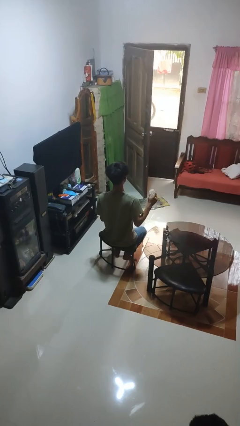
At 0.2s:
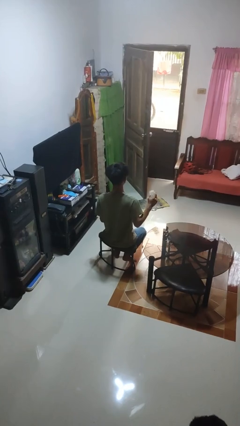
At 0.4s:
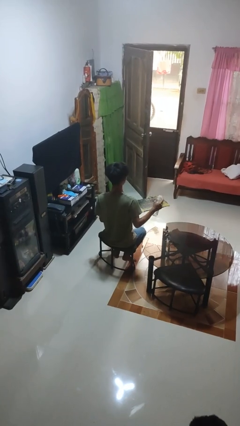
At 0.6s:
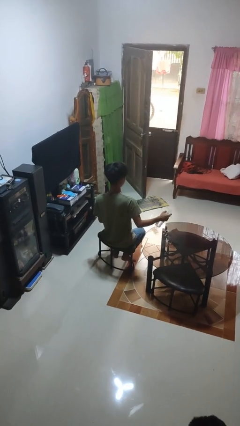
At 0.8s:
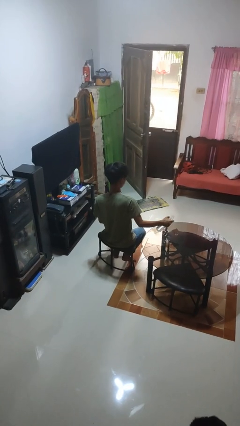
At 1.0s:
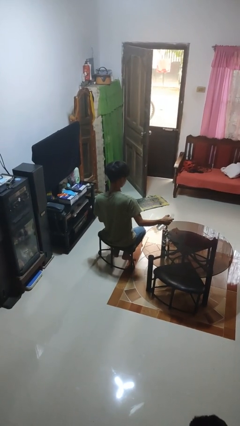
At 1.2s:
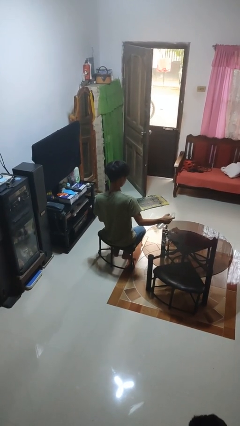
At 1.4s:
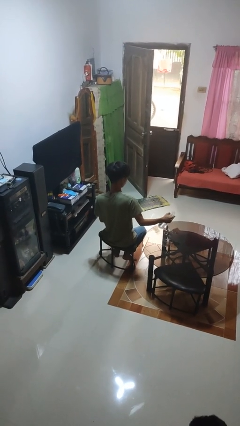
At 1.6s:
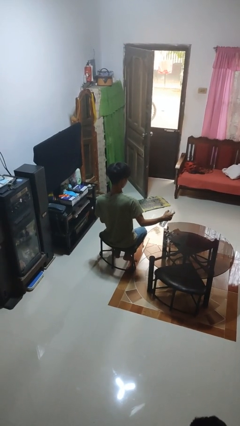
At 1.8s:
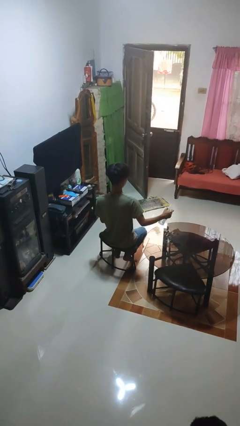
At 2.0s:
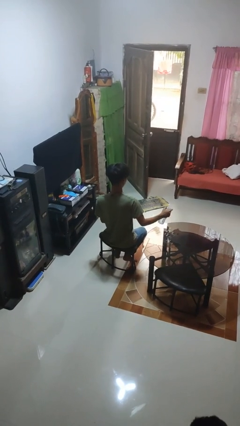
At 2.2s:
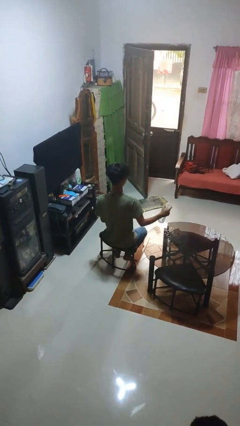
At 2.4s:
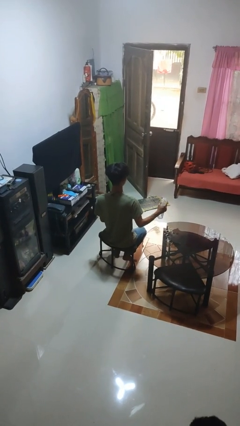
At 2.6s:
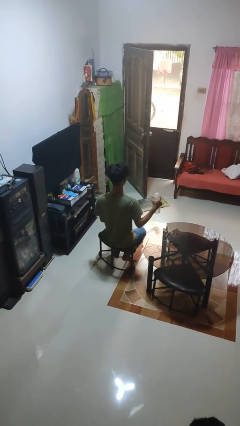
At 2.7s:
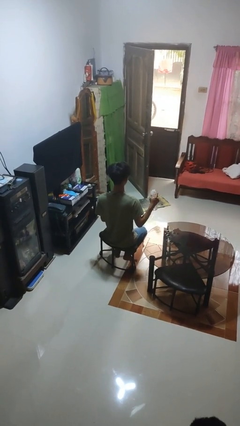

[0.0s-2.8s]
person sprays from bottle

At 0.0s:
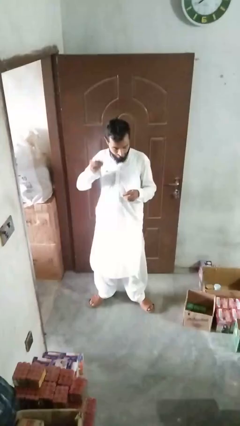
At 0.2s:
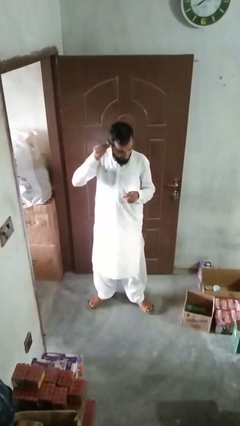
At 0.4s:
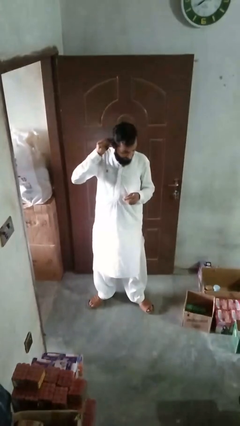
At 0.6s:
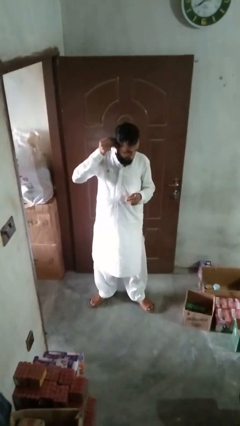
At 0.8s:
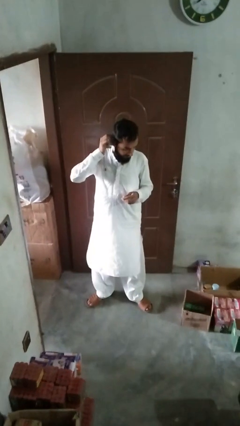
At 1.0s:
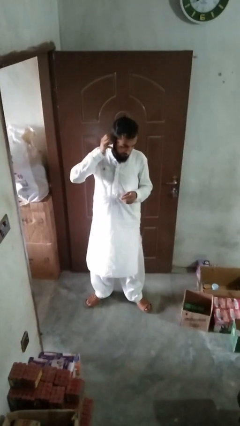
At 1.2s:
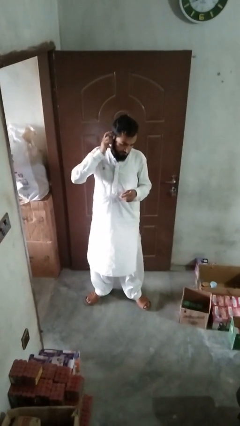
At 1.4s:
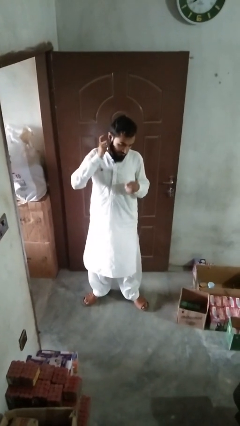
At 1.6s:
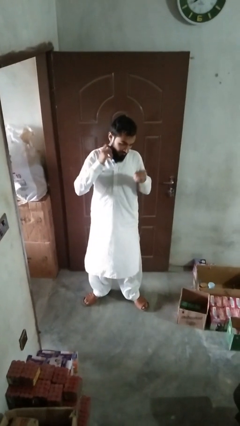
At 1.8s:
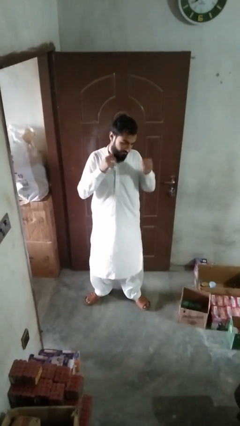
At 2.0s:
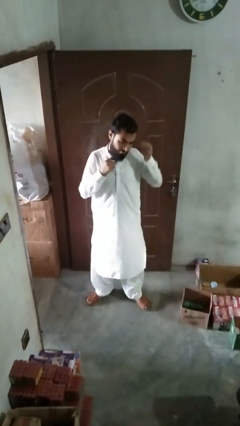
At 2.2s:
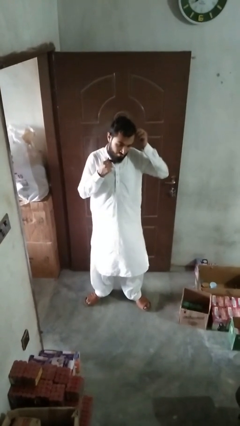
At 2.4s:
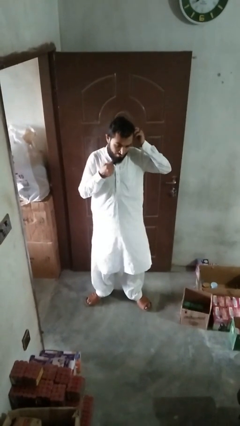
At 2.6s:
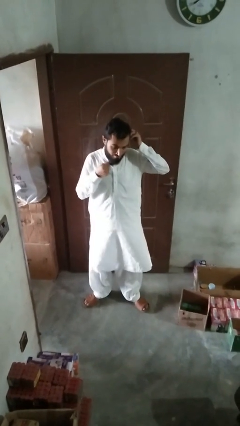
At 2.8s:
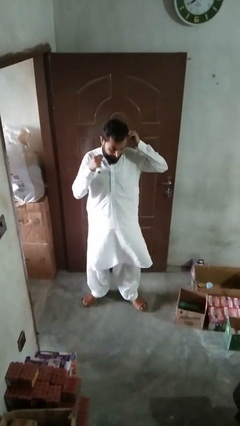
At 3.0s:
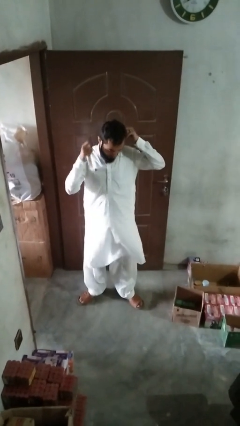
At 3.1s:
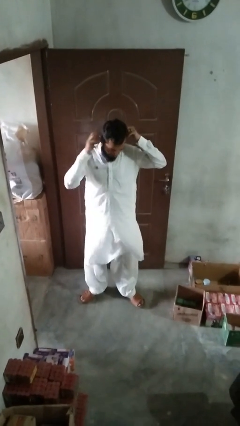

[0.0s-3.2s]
person puts on earrings

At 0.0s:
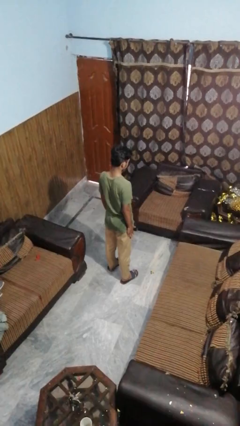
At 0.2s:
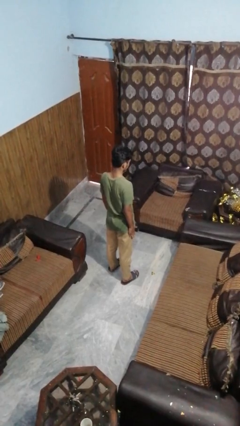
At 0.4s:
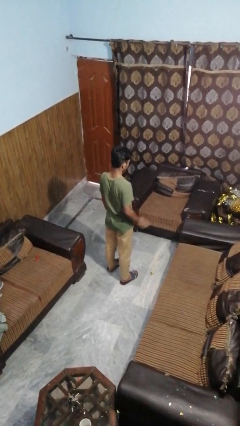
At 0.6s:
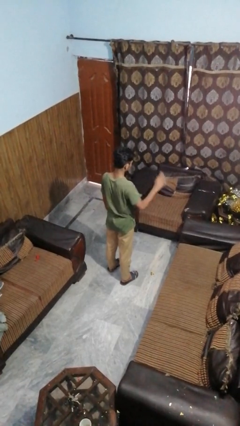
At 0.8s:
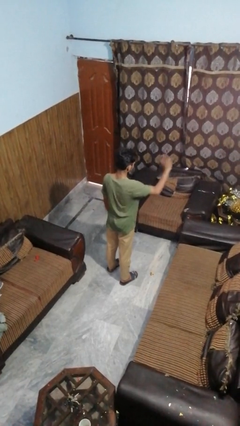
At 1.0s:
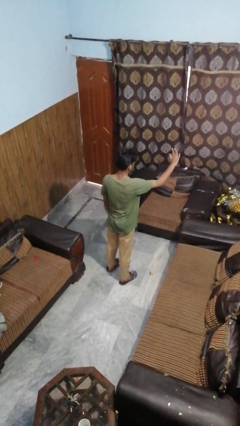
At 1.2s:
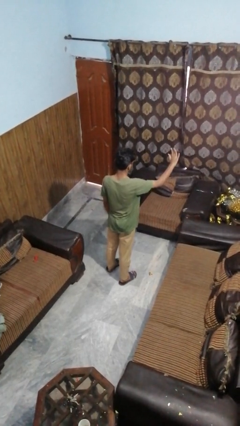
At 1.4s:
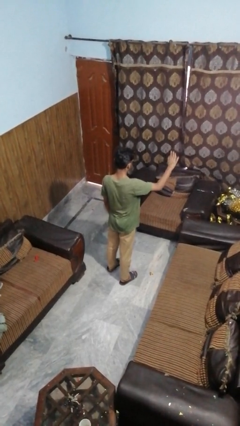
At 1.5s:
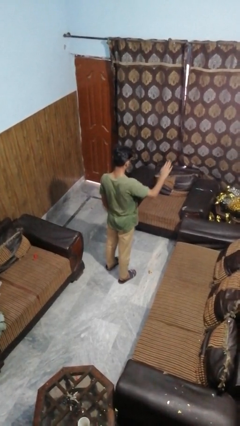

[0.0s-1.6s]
person gestures stop

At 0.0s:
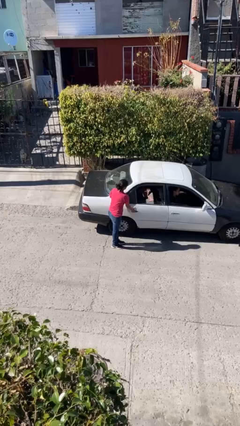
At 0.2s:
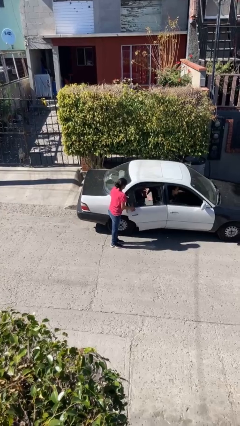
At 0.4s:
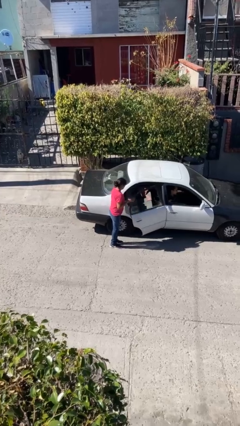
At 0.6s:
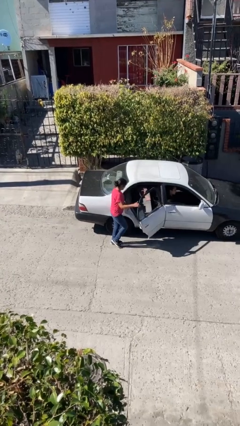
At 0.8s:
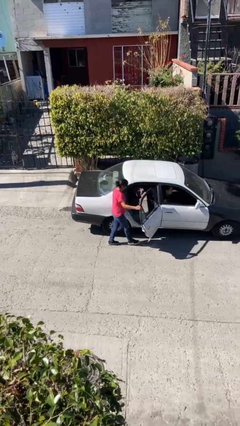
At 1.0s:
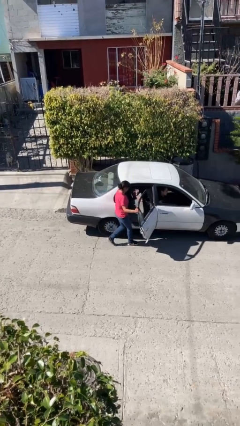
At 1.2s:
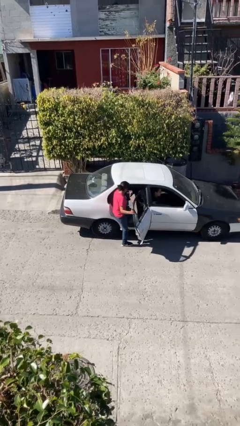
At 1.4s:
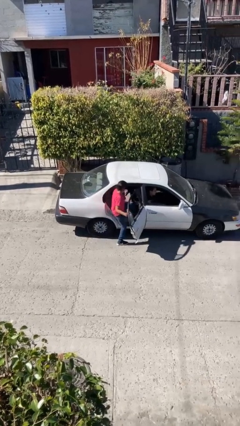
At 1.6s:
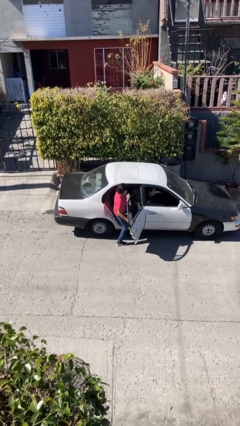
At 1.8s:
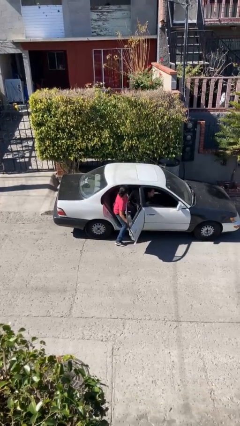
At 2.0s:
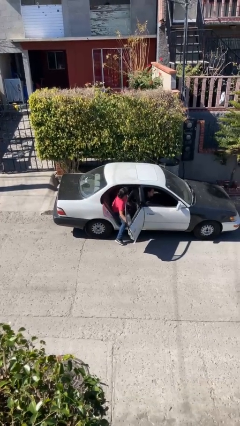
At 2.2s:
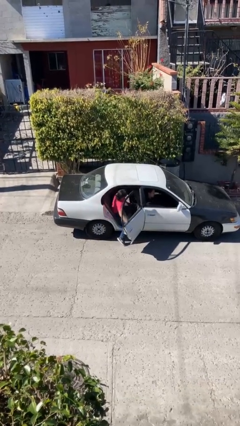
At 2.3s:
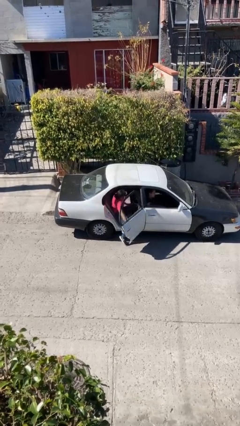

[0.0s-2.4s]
car picks up person

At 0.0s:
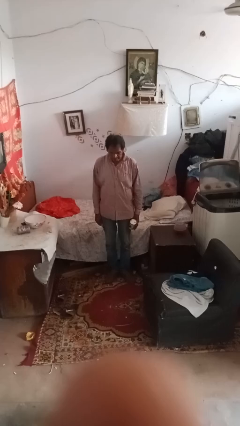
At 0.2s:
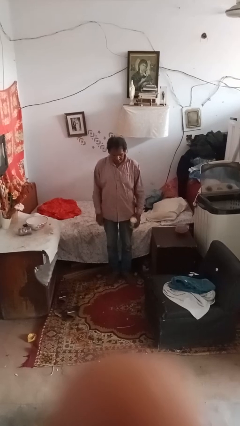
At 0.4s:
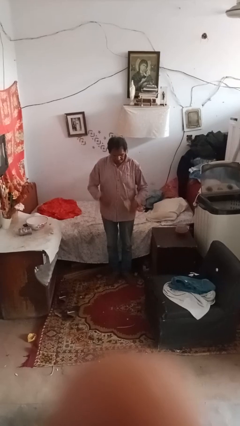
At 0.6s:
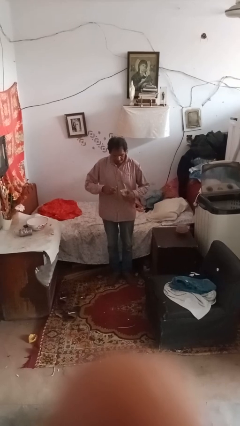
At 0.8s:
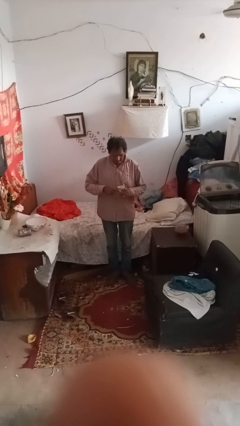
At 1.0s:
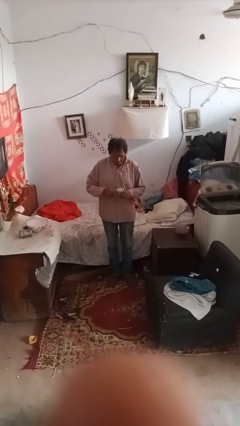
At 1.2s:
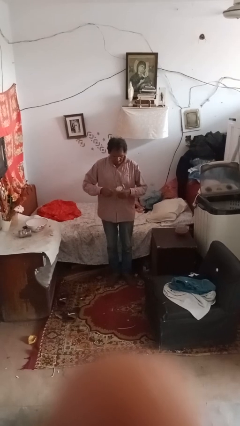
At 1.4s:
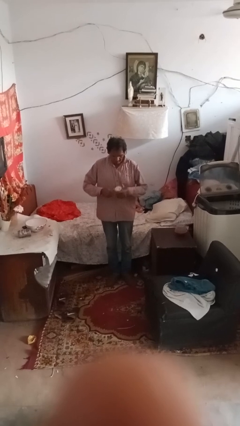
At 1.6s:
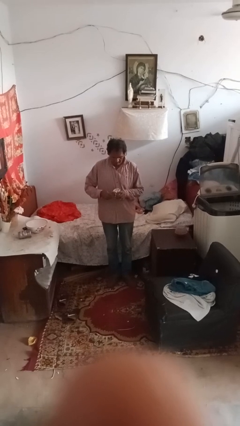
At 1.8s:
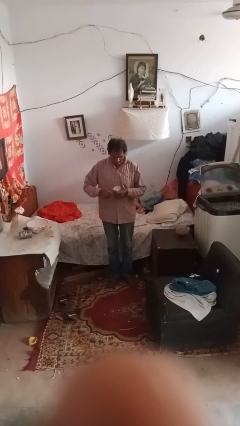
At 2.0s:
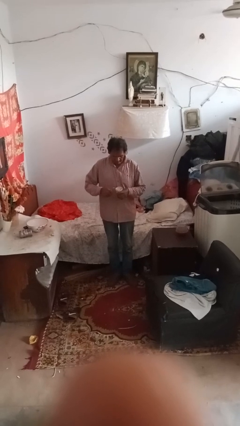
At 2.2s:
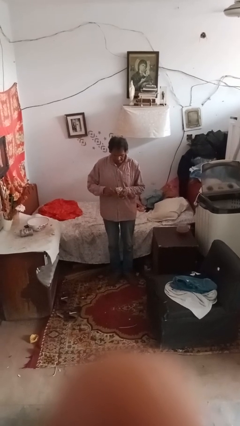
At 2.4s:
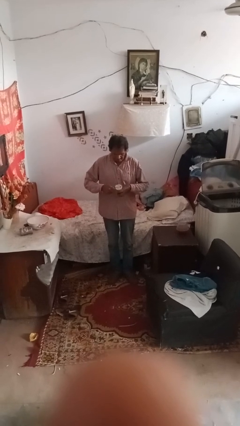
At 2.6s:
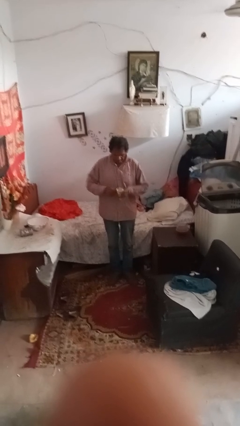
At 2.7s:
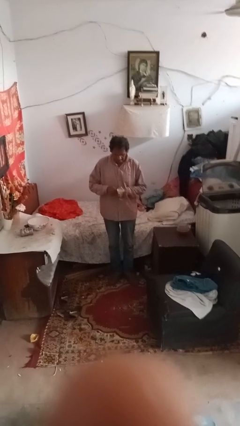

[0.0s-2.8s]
person opens can with can opener

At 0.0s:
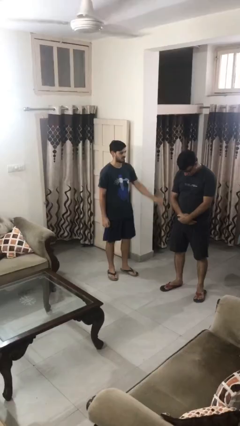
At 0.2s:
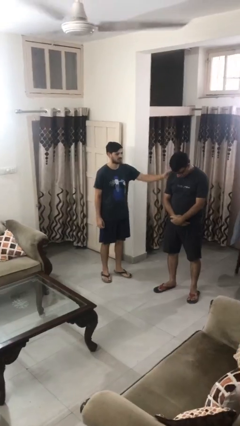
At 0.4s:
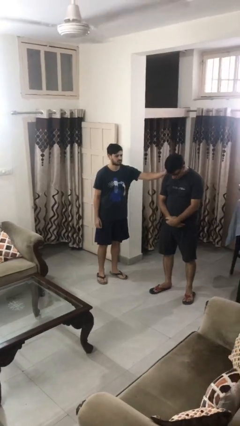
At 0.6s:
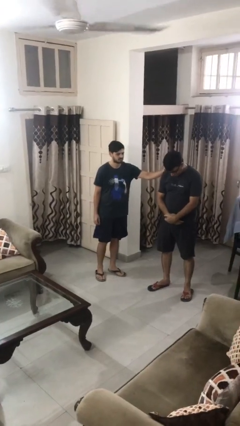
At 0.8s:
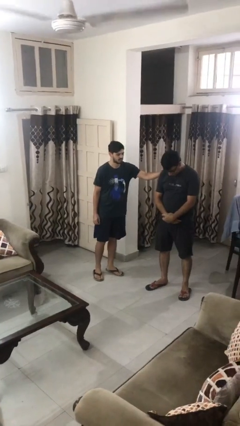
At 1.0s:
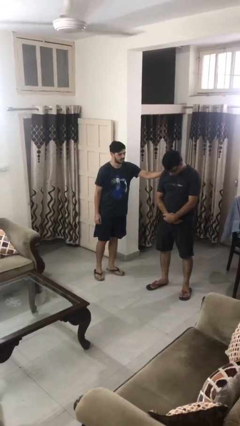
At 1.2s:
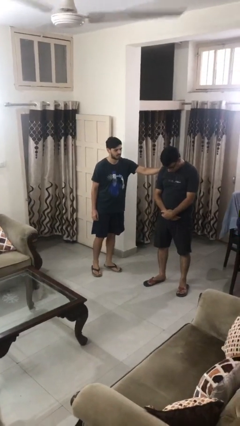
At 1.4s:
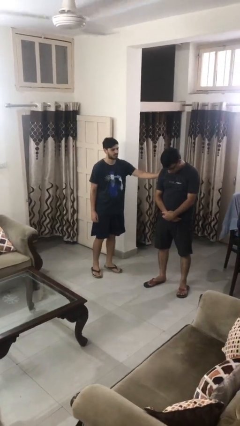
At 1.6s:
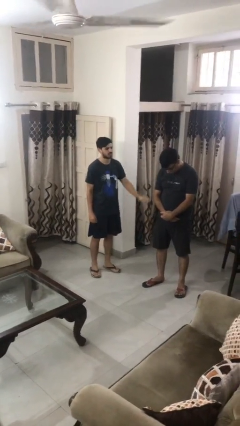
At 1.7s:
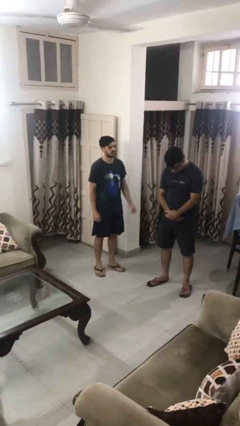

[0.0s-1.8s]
person pounds shoulders of person

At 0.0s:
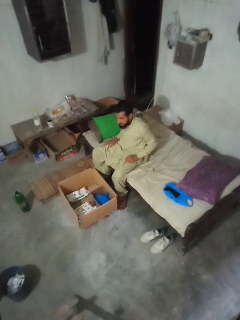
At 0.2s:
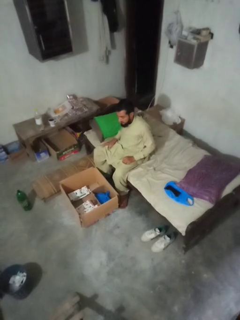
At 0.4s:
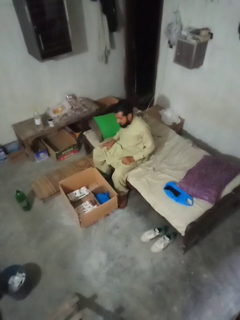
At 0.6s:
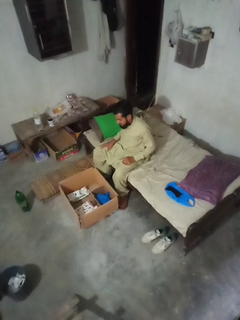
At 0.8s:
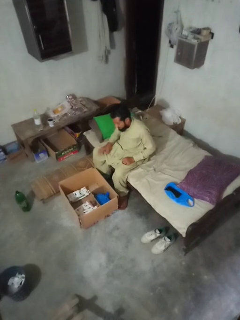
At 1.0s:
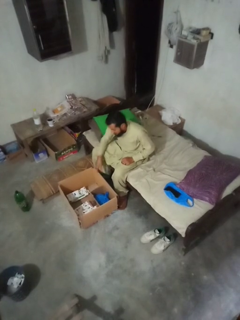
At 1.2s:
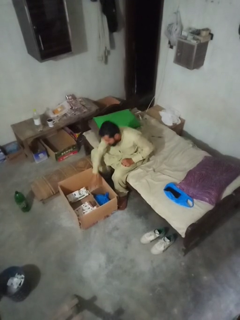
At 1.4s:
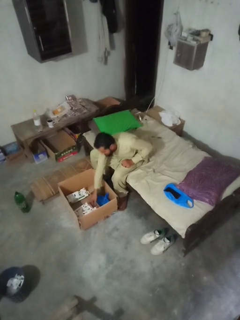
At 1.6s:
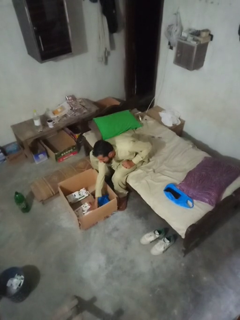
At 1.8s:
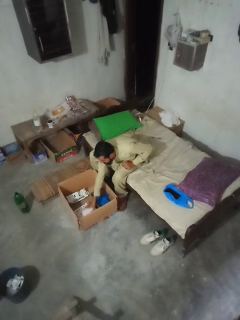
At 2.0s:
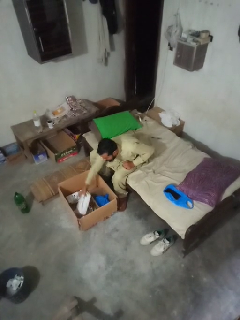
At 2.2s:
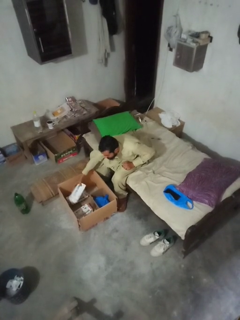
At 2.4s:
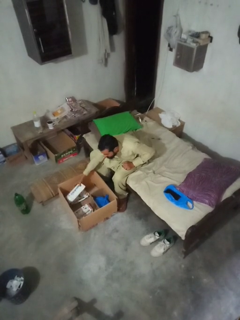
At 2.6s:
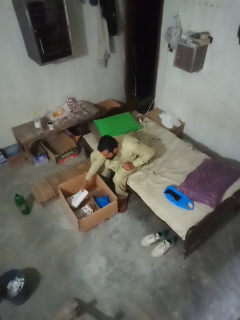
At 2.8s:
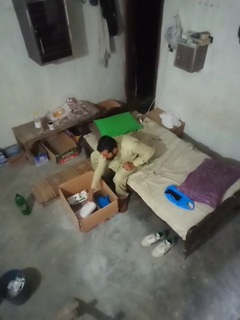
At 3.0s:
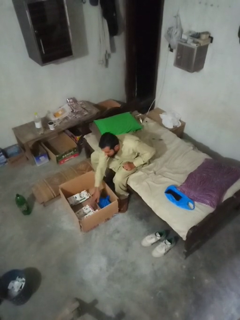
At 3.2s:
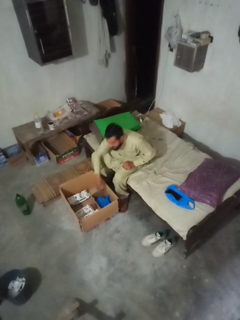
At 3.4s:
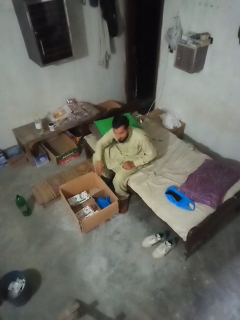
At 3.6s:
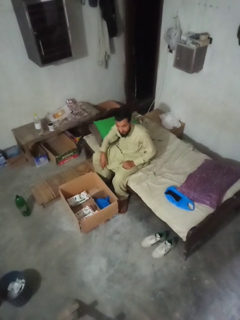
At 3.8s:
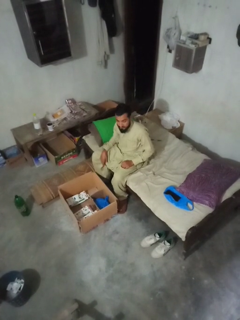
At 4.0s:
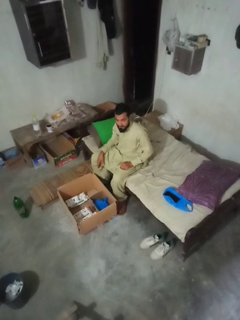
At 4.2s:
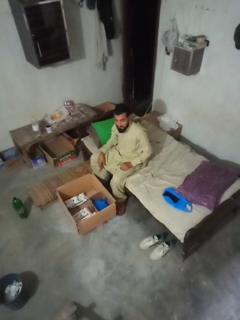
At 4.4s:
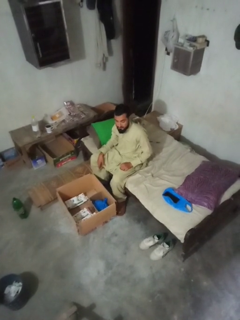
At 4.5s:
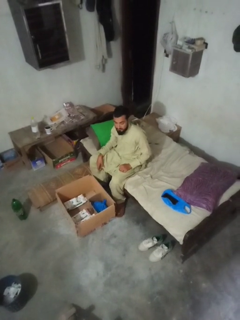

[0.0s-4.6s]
person searches in box
